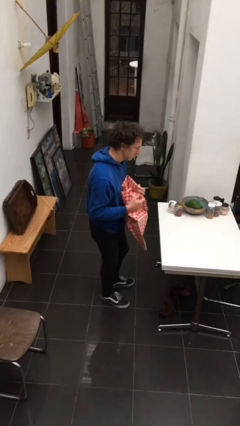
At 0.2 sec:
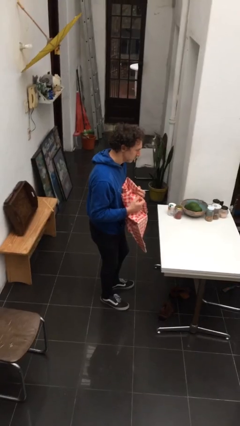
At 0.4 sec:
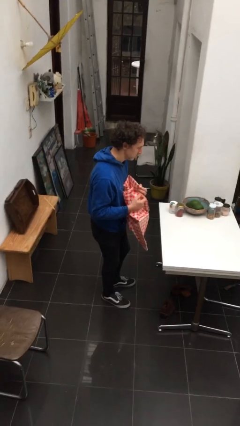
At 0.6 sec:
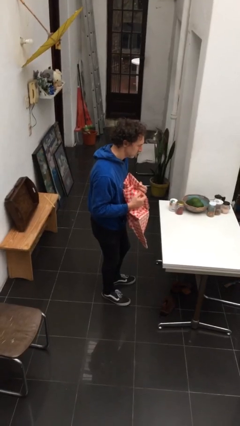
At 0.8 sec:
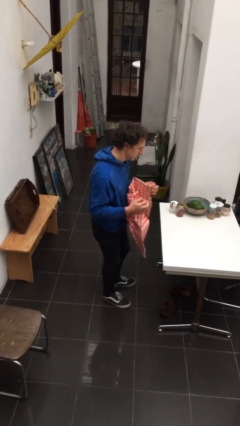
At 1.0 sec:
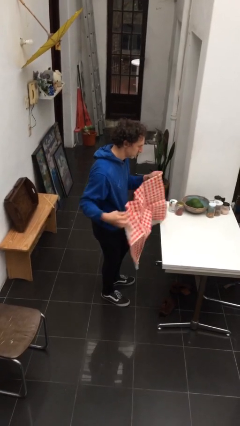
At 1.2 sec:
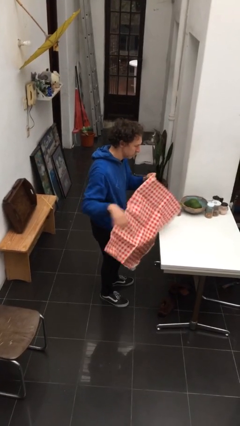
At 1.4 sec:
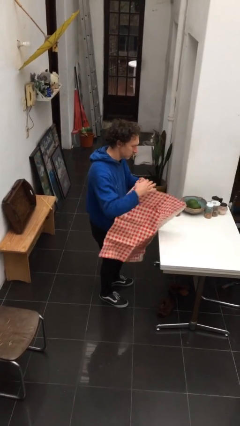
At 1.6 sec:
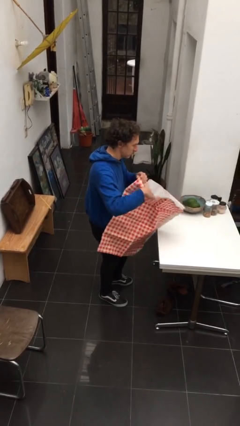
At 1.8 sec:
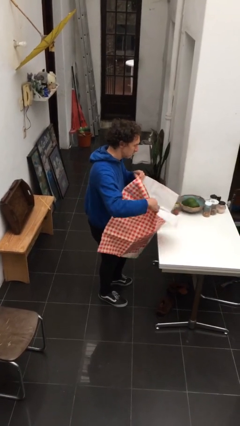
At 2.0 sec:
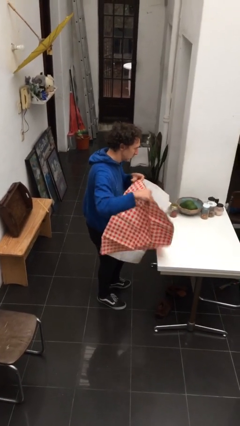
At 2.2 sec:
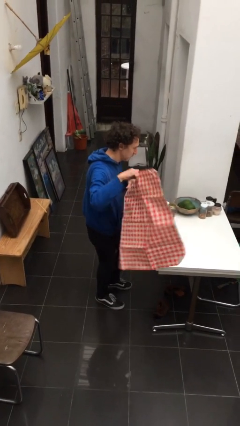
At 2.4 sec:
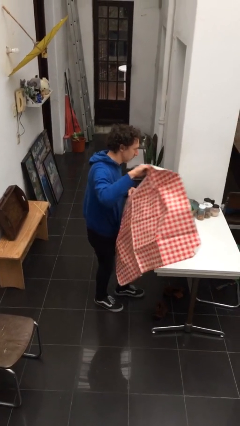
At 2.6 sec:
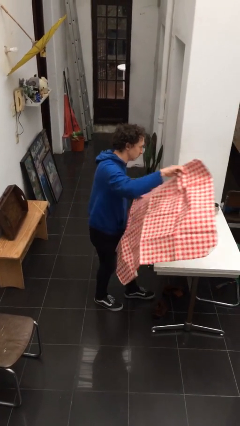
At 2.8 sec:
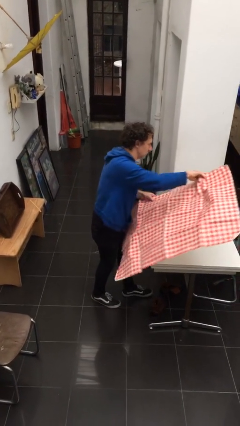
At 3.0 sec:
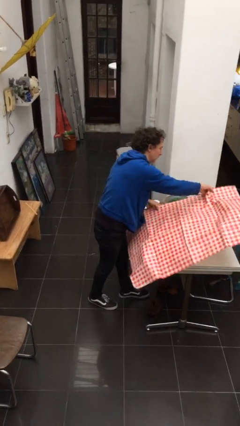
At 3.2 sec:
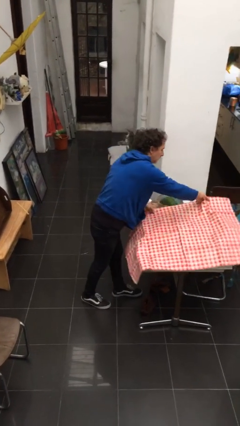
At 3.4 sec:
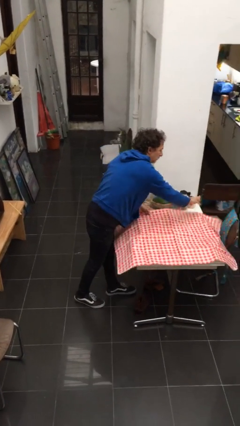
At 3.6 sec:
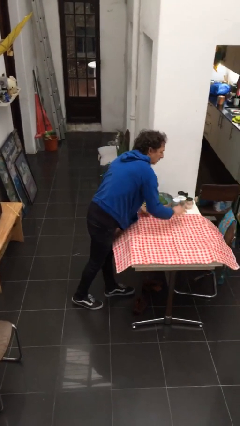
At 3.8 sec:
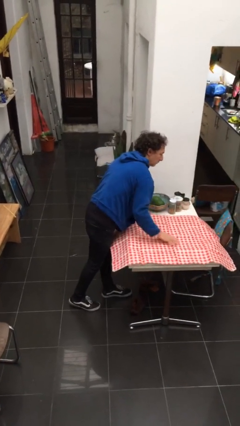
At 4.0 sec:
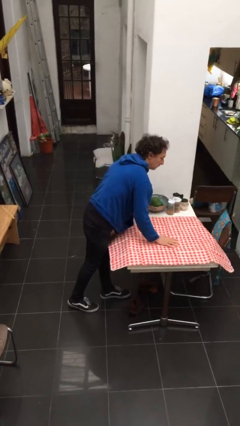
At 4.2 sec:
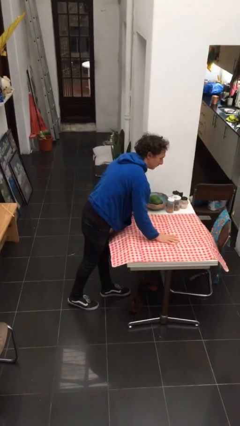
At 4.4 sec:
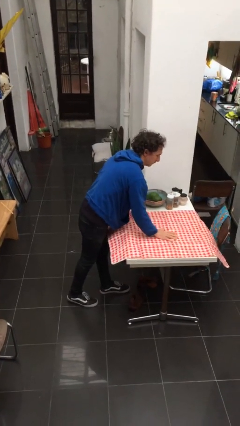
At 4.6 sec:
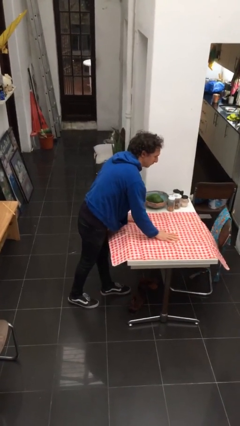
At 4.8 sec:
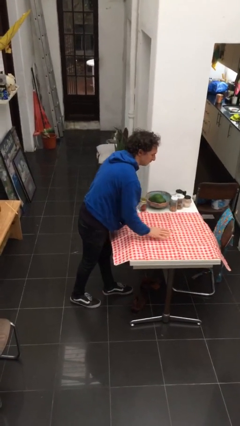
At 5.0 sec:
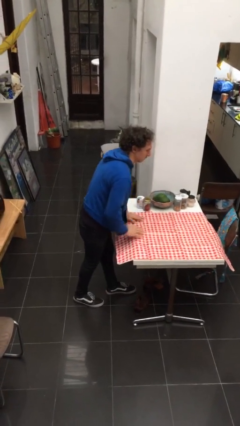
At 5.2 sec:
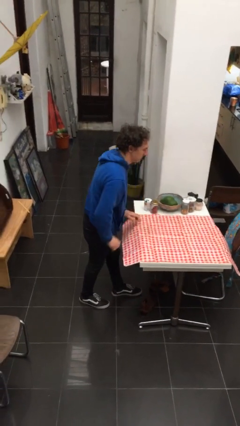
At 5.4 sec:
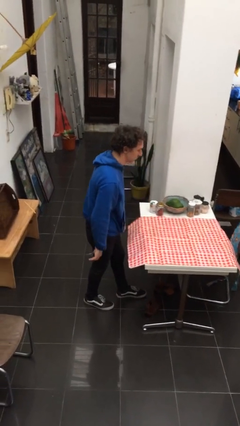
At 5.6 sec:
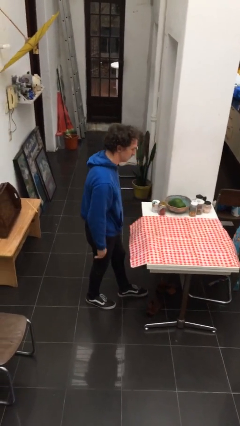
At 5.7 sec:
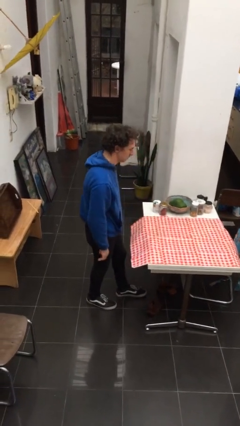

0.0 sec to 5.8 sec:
person spreads tablecloth

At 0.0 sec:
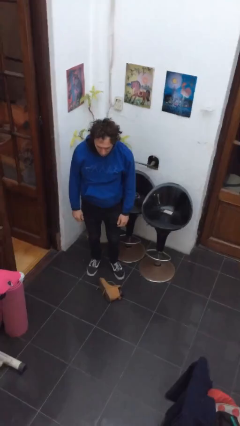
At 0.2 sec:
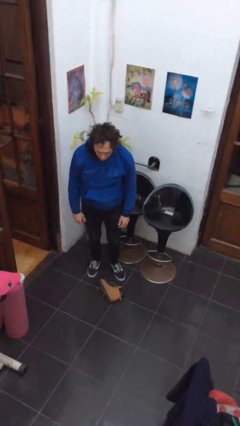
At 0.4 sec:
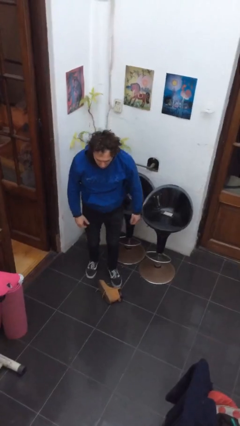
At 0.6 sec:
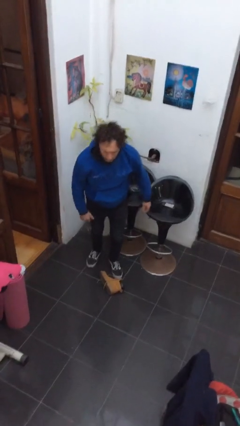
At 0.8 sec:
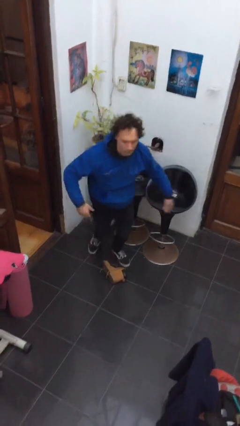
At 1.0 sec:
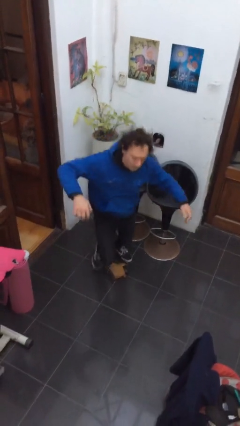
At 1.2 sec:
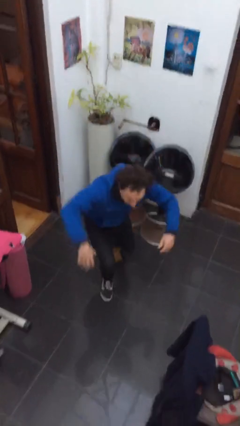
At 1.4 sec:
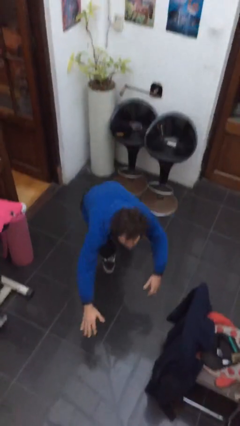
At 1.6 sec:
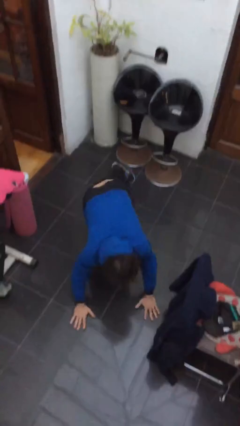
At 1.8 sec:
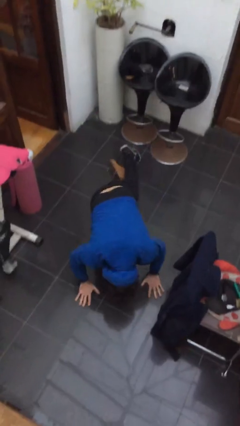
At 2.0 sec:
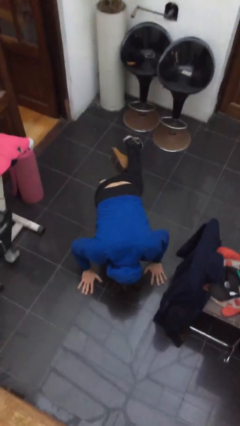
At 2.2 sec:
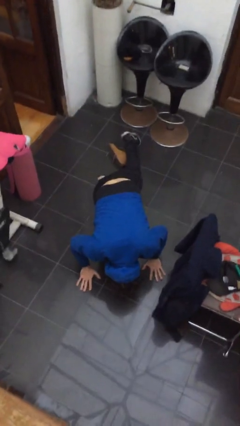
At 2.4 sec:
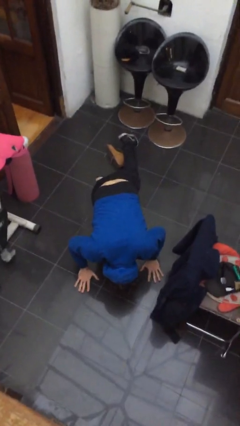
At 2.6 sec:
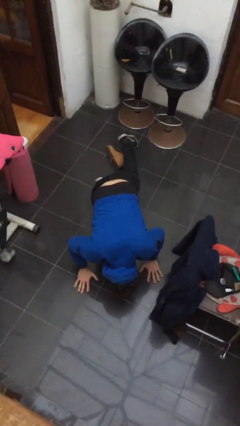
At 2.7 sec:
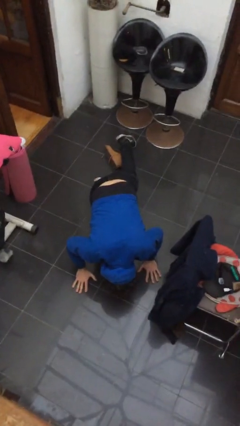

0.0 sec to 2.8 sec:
person trips on object on floor

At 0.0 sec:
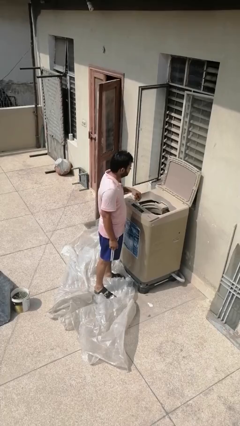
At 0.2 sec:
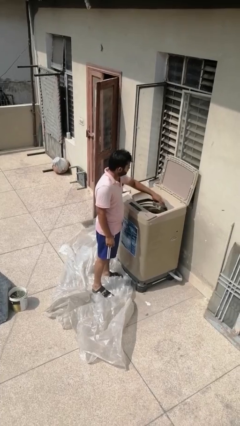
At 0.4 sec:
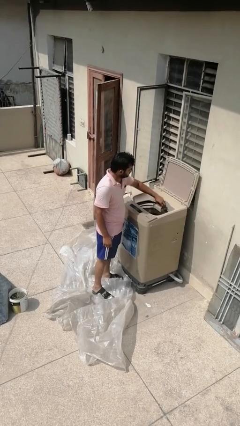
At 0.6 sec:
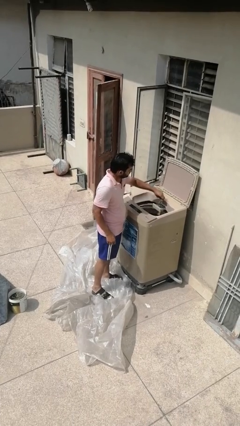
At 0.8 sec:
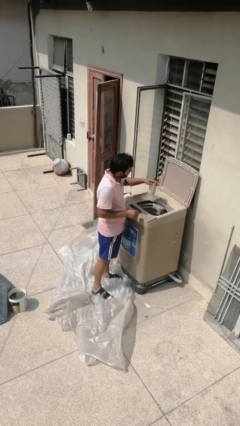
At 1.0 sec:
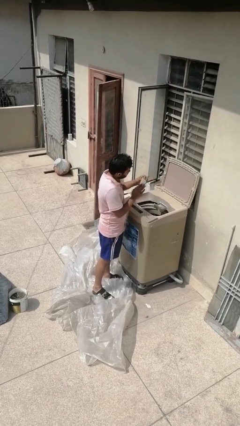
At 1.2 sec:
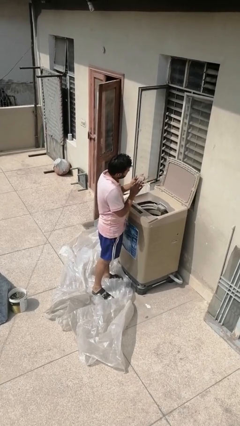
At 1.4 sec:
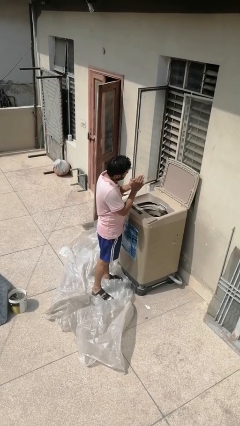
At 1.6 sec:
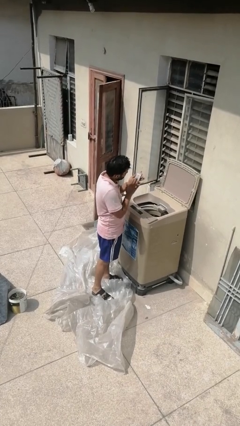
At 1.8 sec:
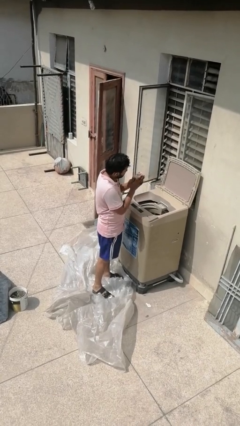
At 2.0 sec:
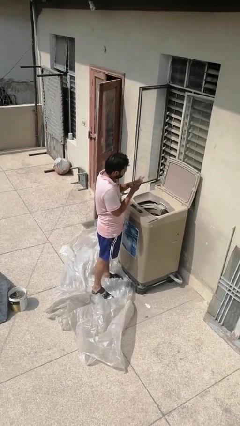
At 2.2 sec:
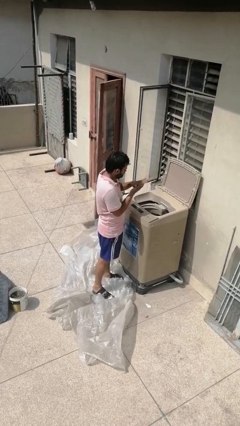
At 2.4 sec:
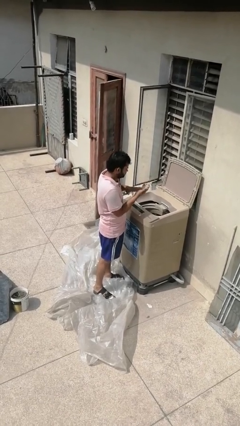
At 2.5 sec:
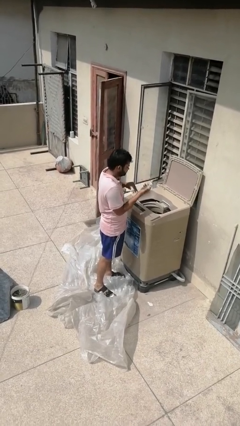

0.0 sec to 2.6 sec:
person cleans dryer lint trap

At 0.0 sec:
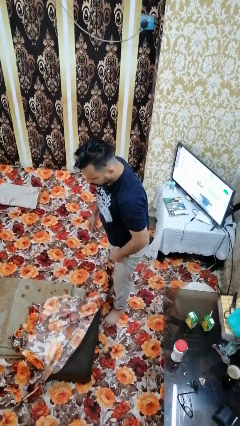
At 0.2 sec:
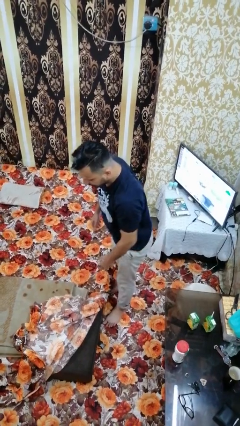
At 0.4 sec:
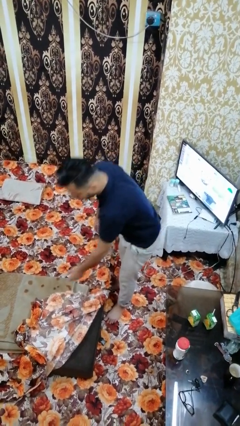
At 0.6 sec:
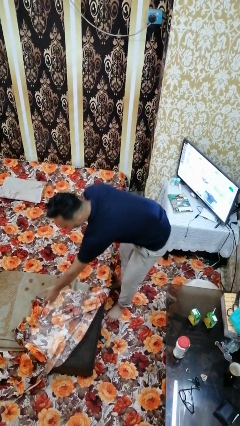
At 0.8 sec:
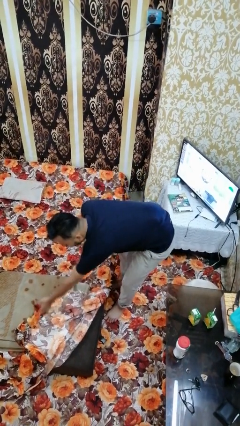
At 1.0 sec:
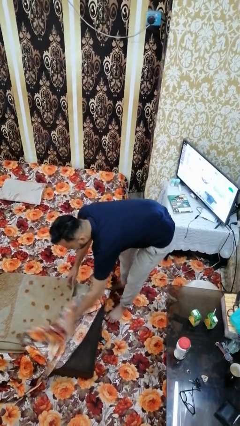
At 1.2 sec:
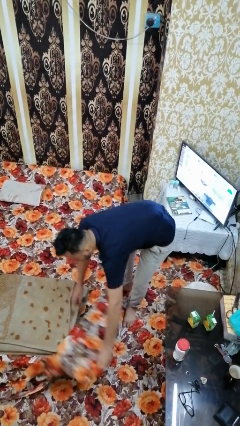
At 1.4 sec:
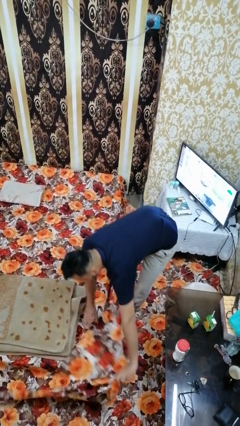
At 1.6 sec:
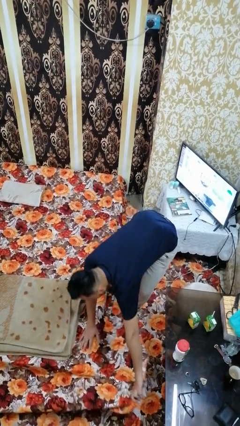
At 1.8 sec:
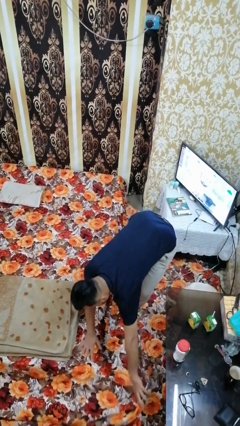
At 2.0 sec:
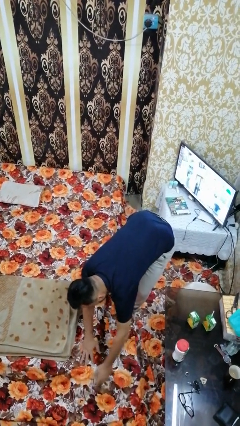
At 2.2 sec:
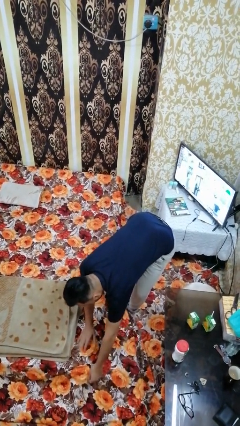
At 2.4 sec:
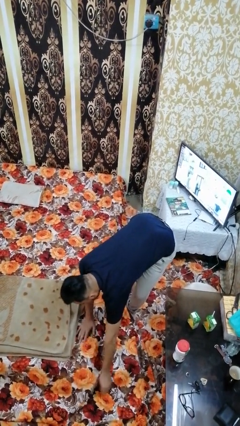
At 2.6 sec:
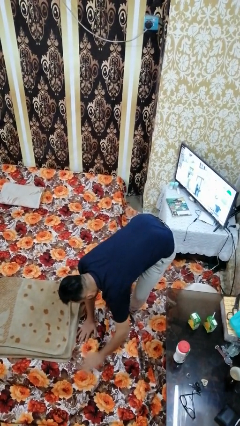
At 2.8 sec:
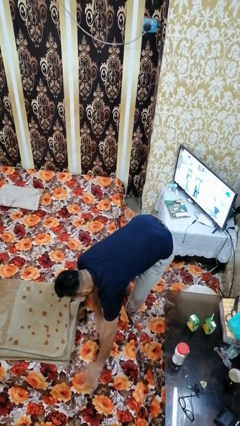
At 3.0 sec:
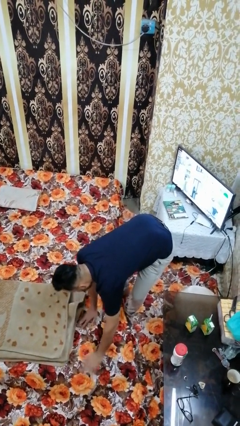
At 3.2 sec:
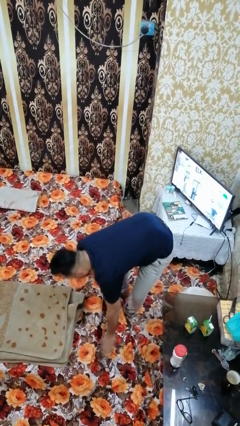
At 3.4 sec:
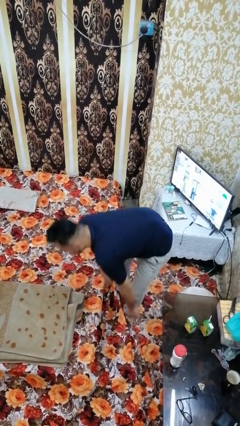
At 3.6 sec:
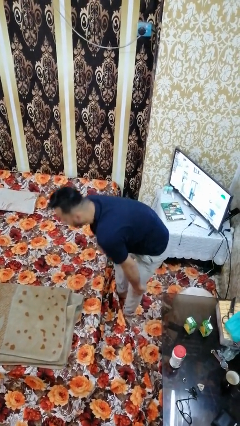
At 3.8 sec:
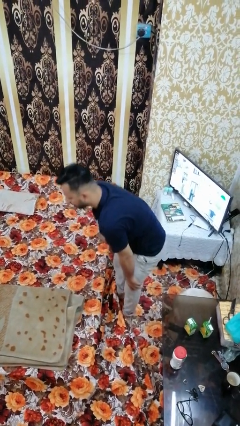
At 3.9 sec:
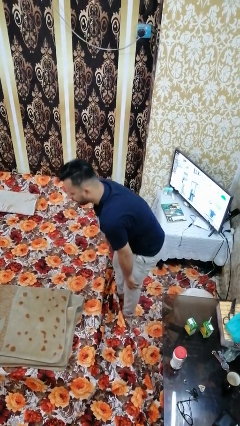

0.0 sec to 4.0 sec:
person makes bed

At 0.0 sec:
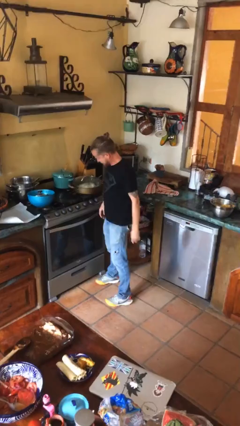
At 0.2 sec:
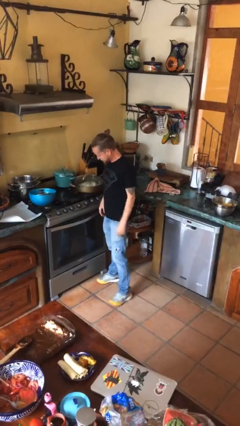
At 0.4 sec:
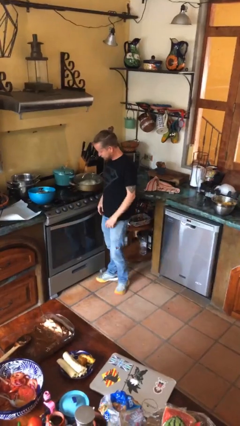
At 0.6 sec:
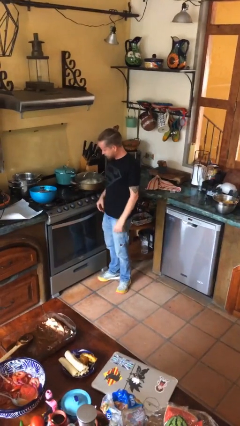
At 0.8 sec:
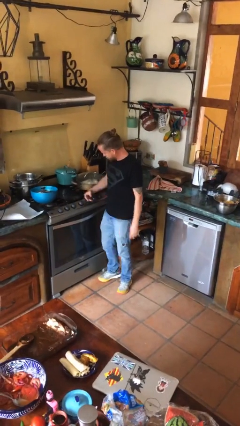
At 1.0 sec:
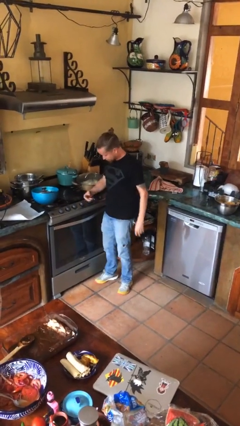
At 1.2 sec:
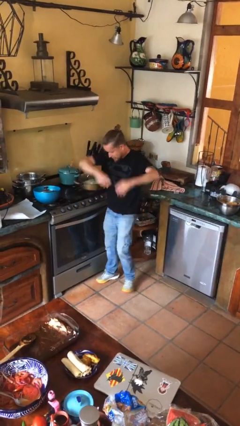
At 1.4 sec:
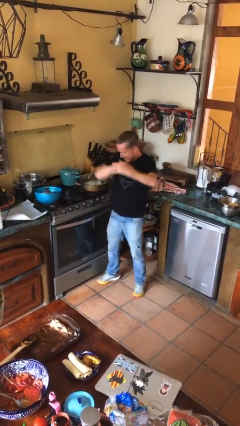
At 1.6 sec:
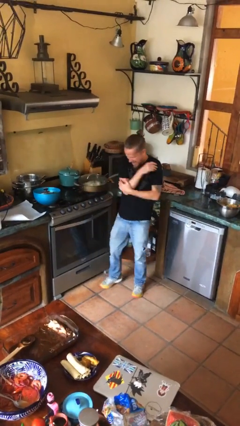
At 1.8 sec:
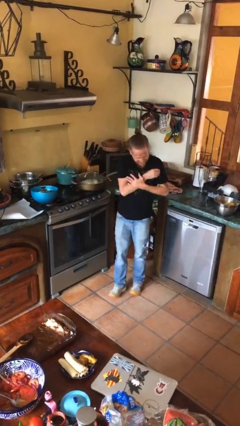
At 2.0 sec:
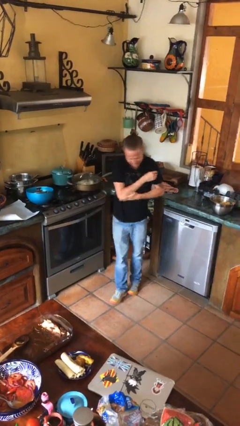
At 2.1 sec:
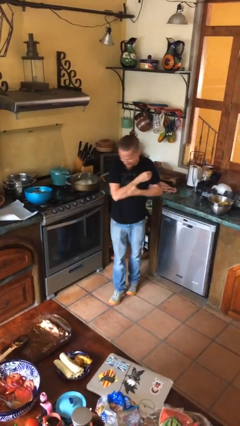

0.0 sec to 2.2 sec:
person burns hand
